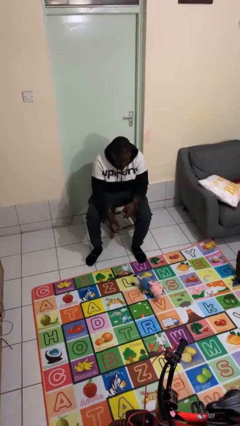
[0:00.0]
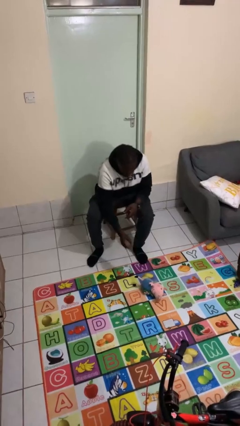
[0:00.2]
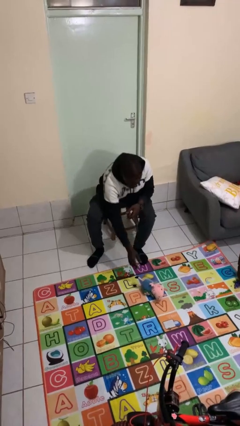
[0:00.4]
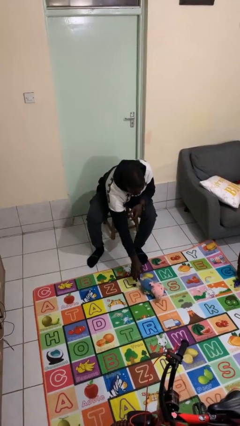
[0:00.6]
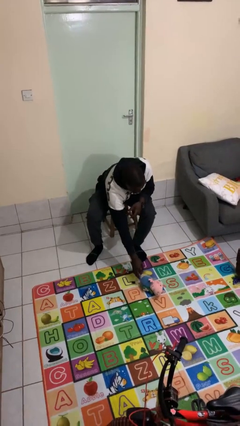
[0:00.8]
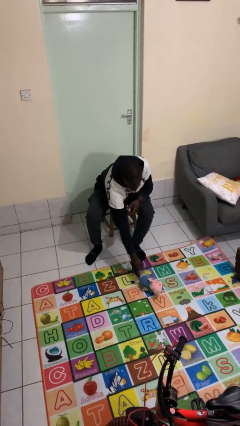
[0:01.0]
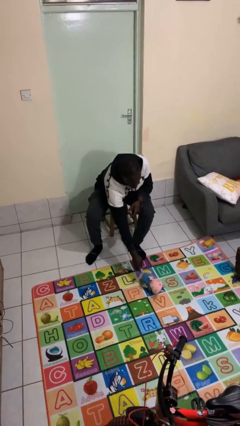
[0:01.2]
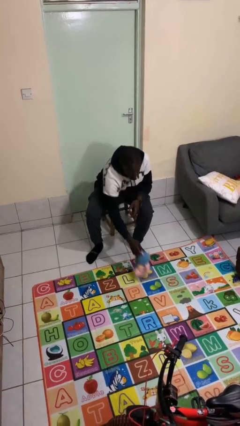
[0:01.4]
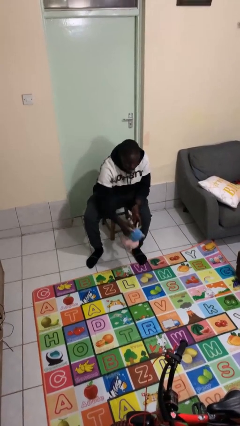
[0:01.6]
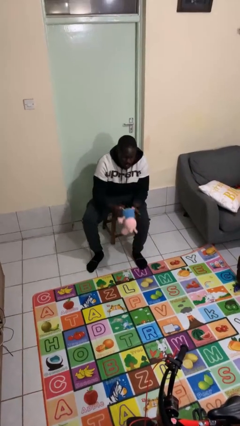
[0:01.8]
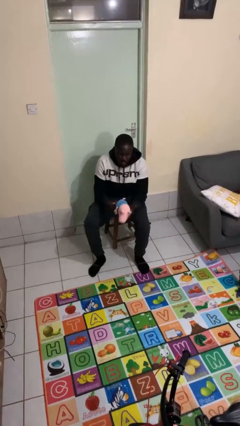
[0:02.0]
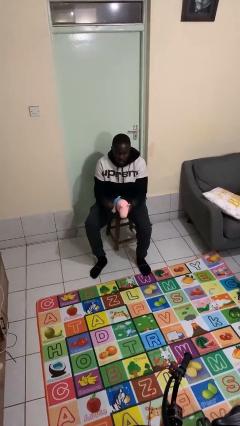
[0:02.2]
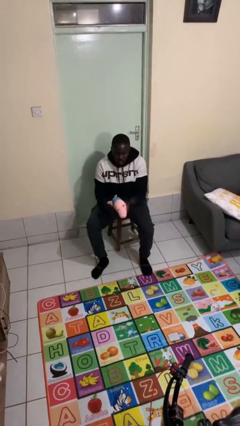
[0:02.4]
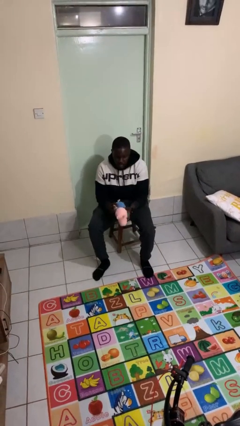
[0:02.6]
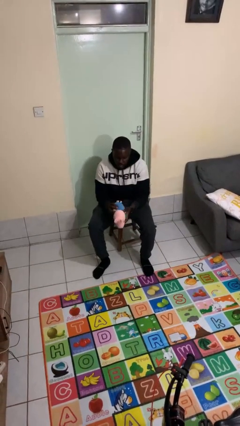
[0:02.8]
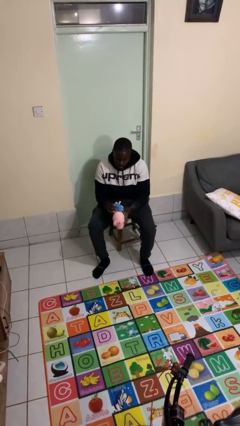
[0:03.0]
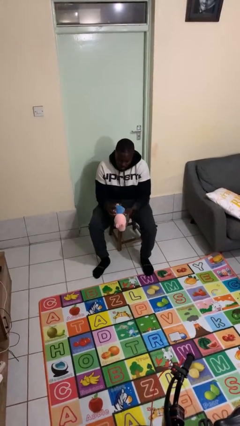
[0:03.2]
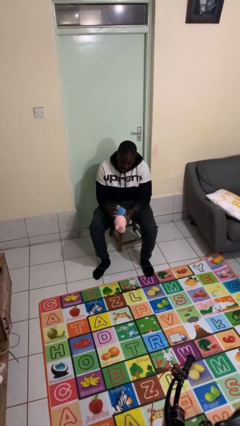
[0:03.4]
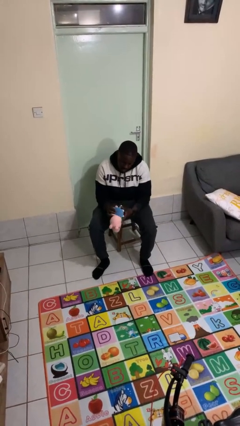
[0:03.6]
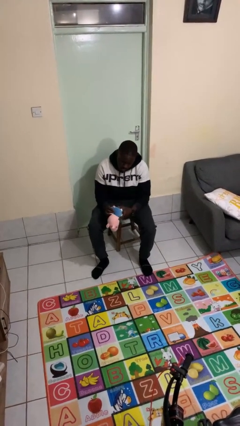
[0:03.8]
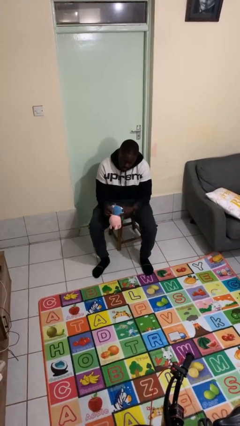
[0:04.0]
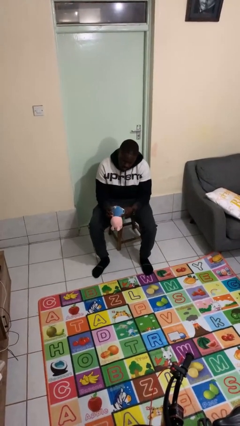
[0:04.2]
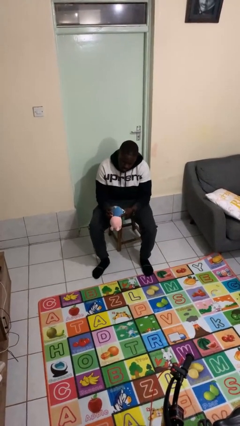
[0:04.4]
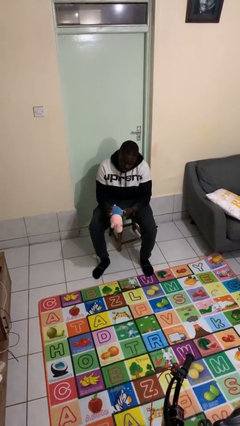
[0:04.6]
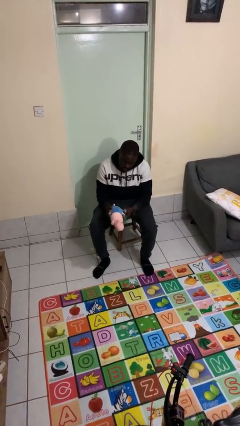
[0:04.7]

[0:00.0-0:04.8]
person picks up object from floor

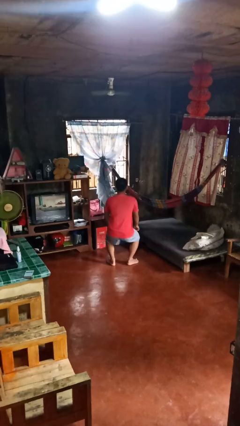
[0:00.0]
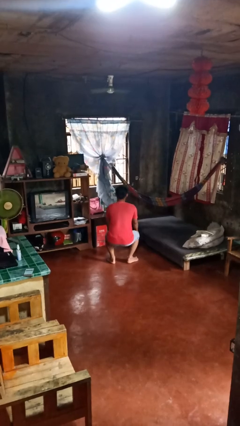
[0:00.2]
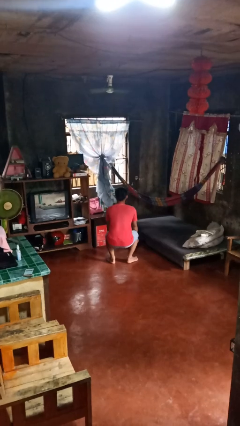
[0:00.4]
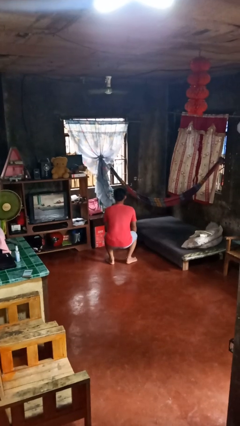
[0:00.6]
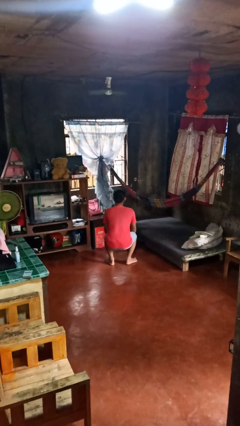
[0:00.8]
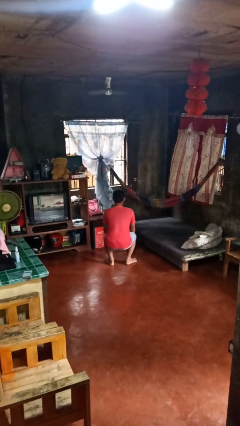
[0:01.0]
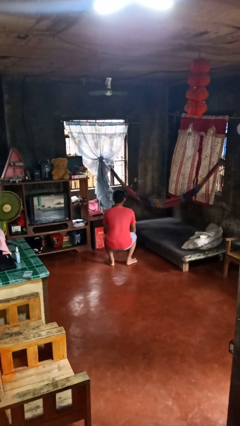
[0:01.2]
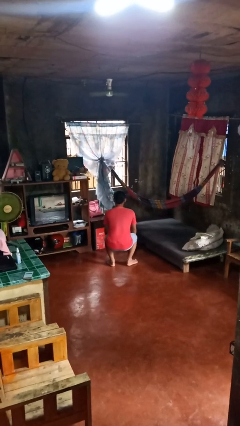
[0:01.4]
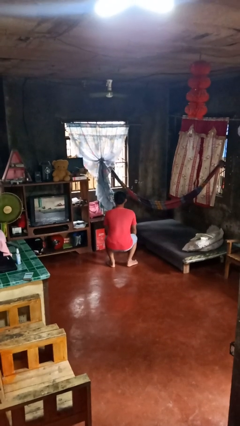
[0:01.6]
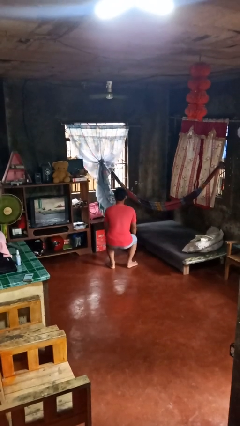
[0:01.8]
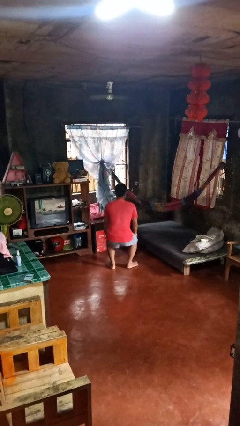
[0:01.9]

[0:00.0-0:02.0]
person squats

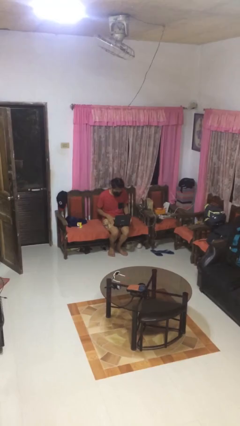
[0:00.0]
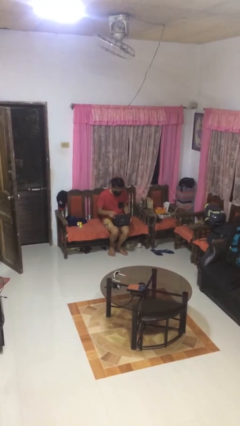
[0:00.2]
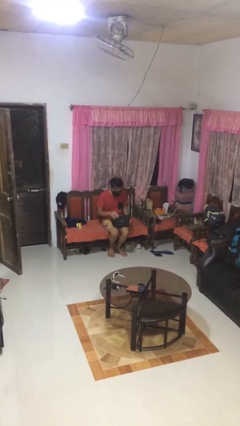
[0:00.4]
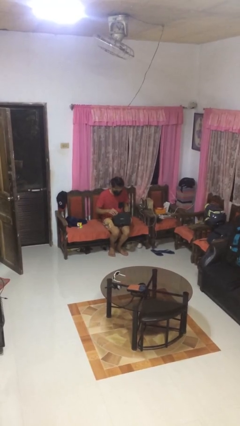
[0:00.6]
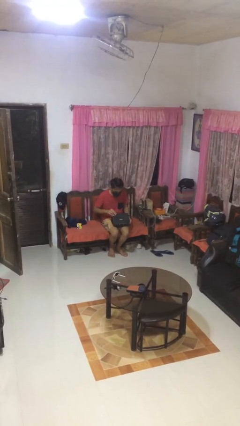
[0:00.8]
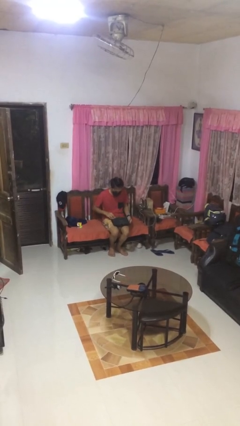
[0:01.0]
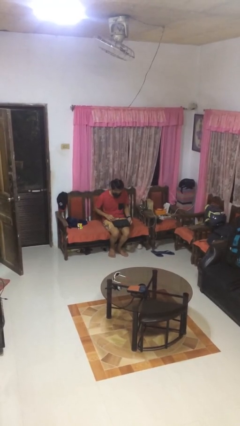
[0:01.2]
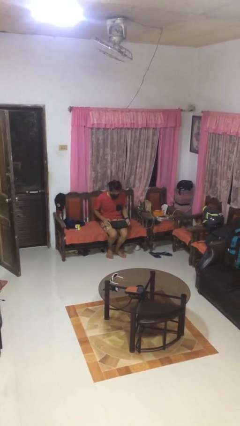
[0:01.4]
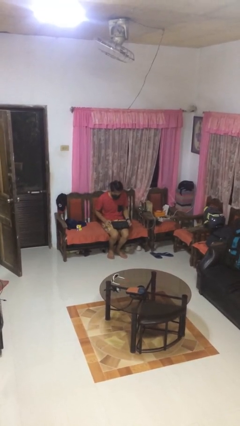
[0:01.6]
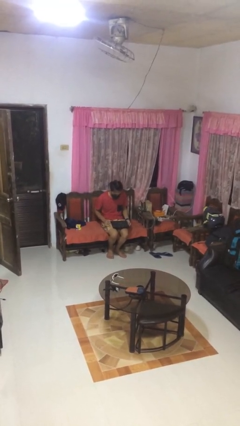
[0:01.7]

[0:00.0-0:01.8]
person closes laptop

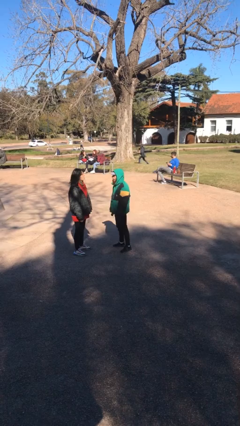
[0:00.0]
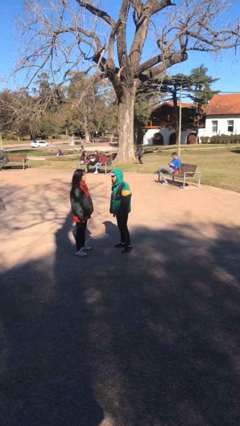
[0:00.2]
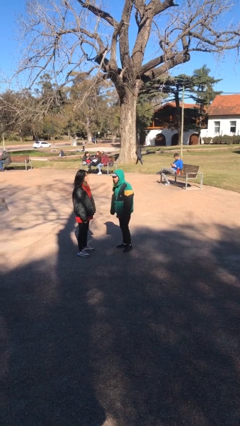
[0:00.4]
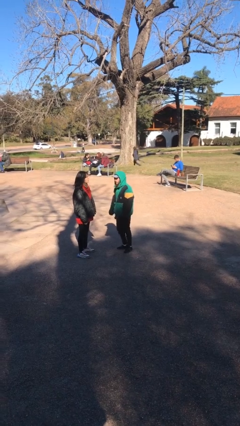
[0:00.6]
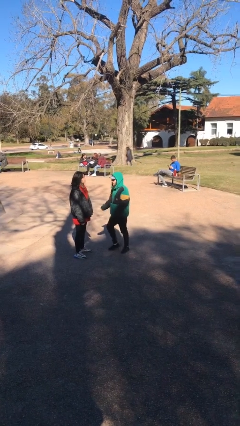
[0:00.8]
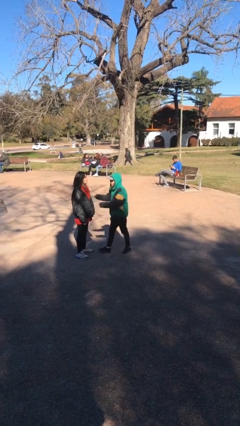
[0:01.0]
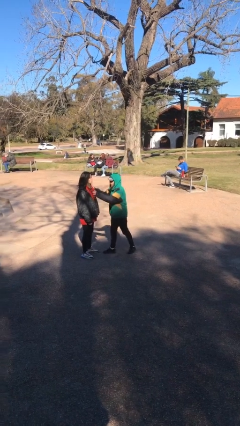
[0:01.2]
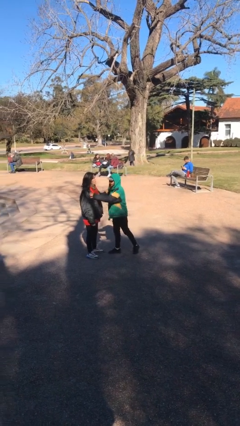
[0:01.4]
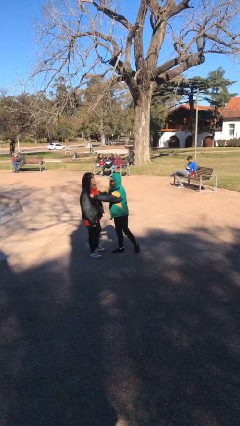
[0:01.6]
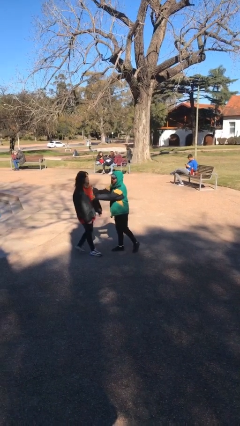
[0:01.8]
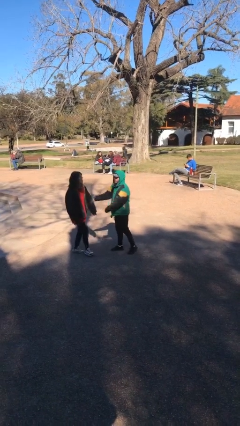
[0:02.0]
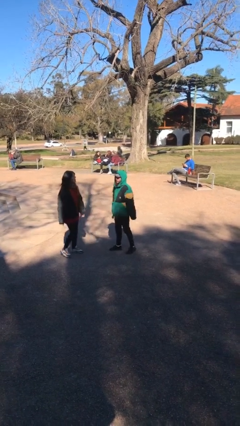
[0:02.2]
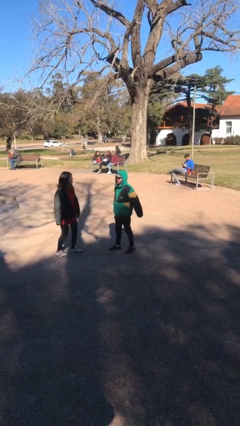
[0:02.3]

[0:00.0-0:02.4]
person shoves person

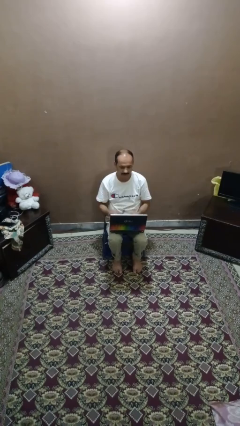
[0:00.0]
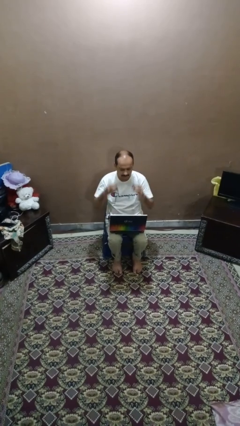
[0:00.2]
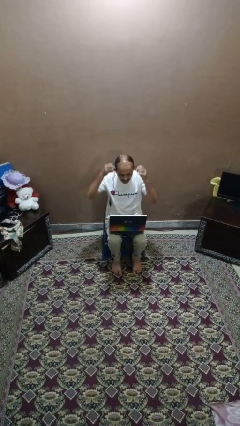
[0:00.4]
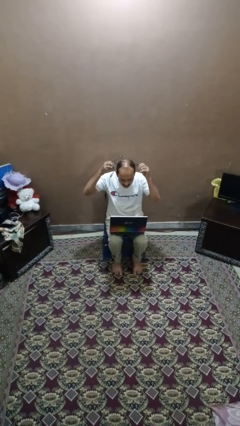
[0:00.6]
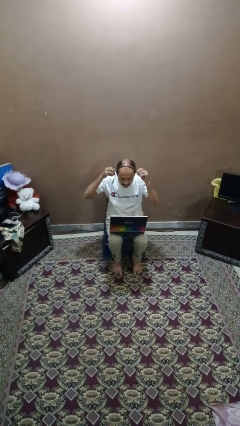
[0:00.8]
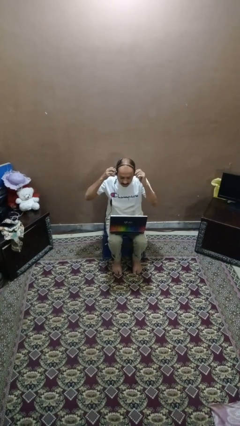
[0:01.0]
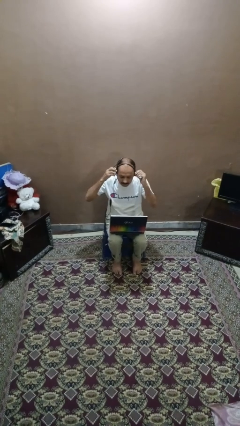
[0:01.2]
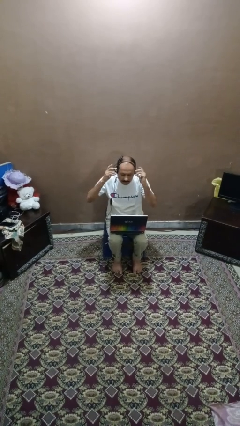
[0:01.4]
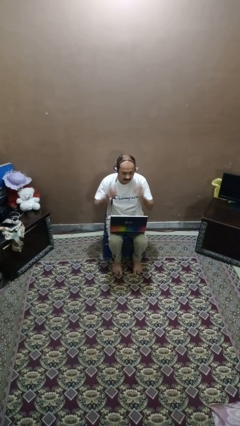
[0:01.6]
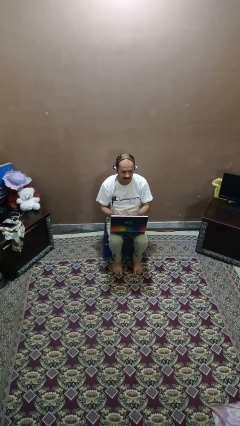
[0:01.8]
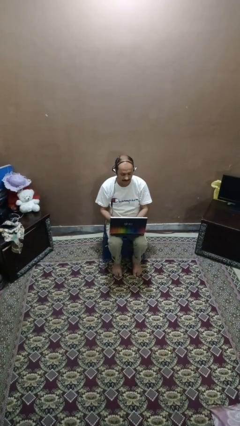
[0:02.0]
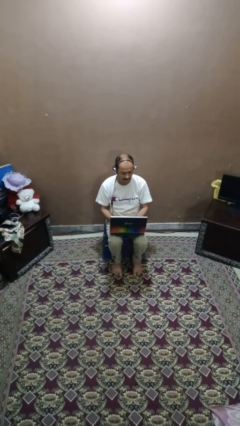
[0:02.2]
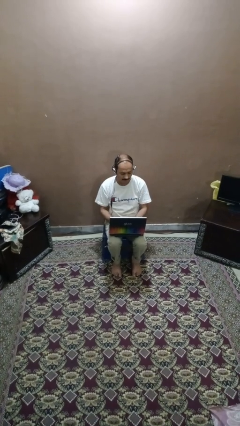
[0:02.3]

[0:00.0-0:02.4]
person puts on headphones

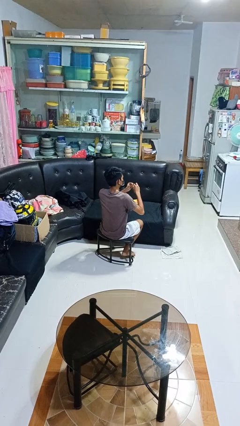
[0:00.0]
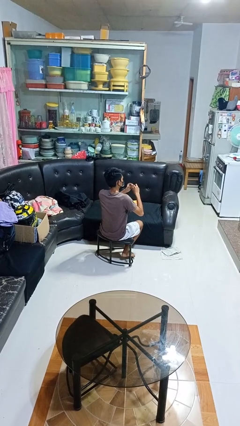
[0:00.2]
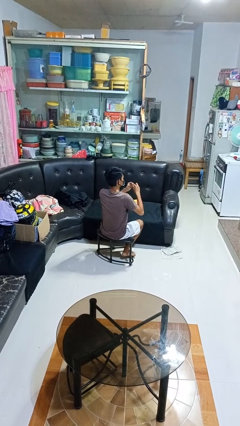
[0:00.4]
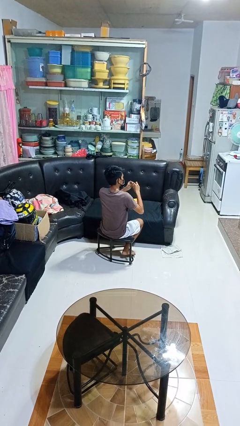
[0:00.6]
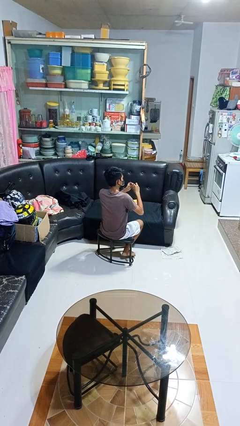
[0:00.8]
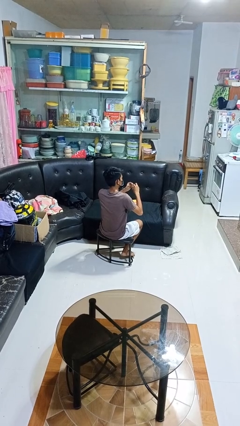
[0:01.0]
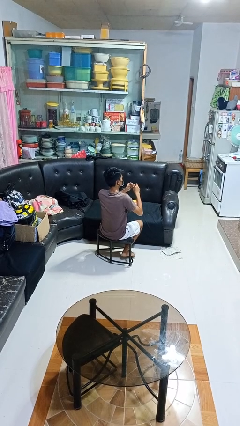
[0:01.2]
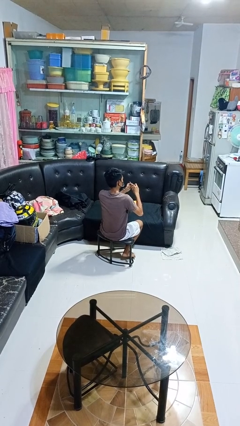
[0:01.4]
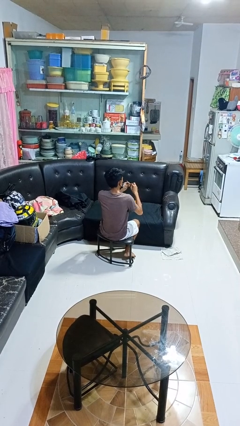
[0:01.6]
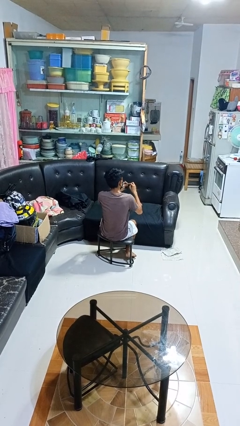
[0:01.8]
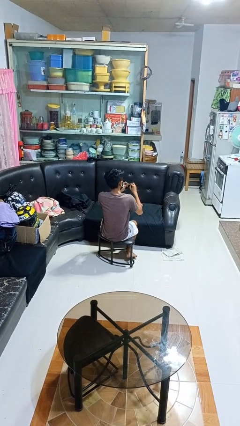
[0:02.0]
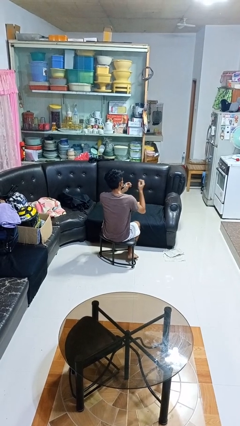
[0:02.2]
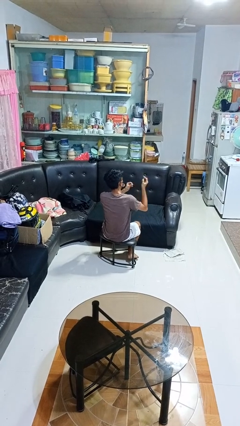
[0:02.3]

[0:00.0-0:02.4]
person files fingernails

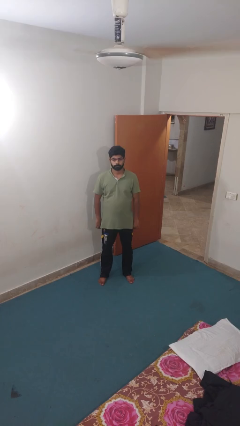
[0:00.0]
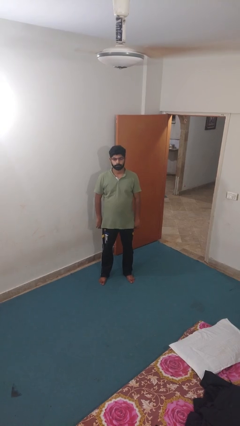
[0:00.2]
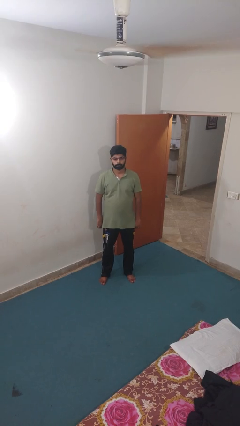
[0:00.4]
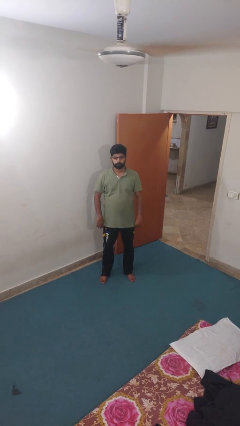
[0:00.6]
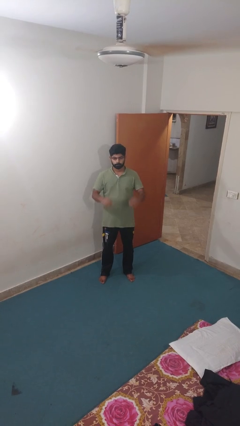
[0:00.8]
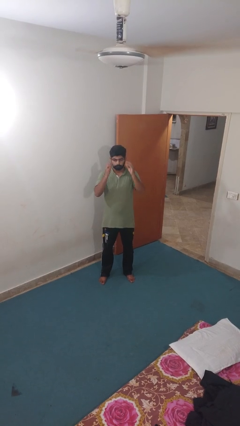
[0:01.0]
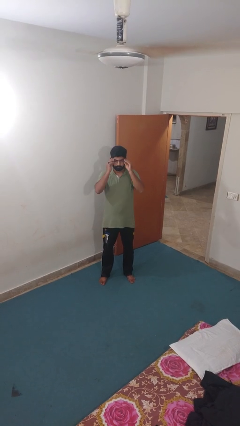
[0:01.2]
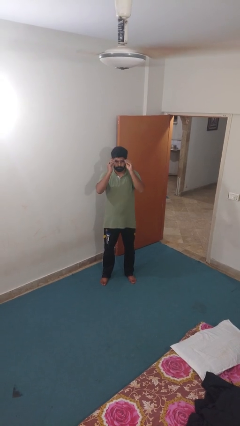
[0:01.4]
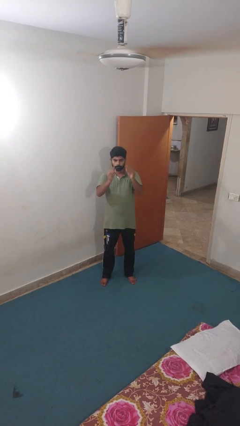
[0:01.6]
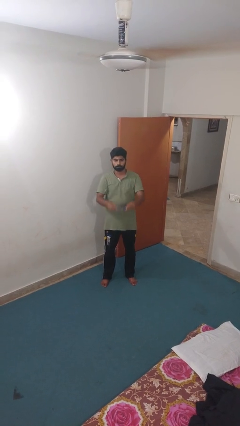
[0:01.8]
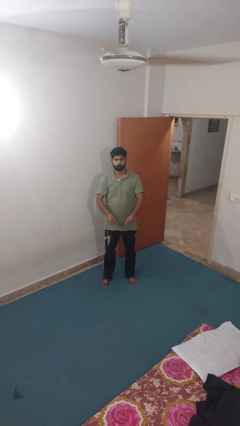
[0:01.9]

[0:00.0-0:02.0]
person takes off glasses
